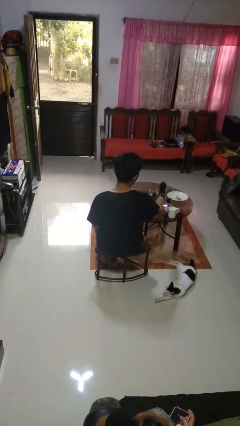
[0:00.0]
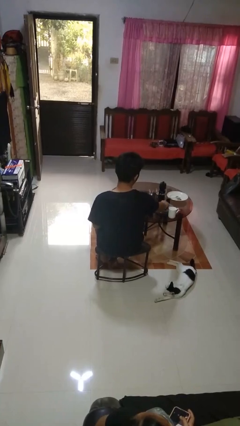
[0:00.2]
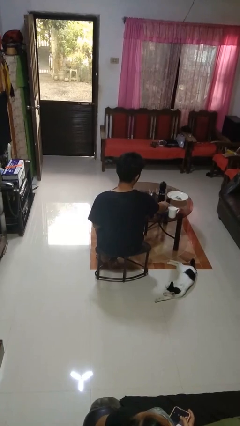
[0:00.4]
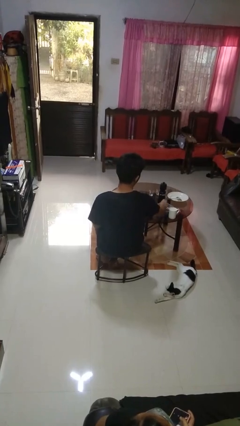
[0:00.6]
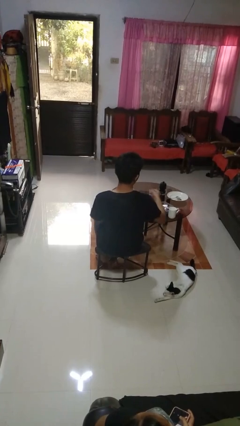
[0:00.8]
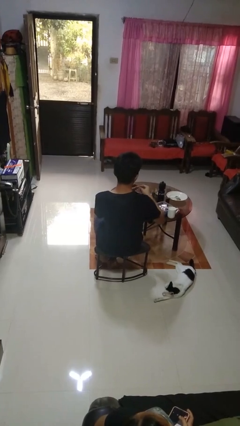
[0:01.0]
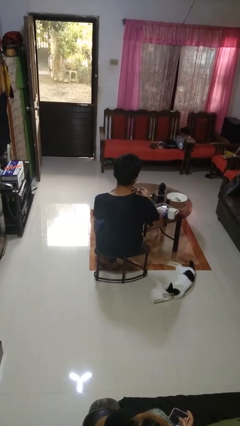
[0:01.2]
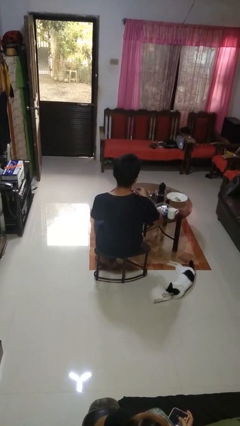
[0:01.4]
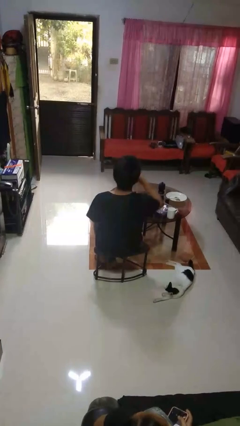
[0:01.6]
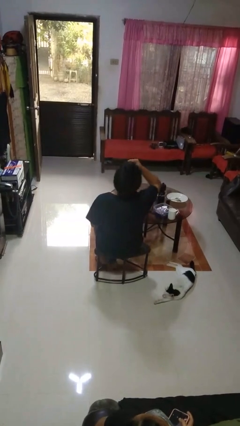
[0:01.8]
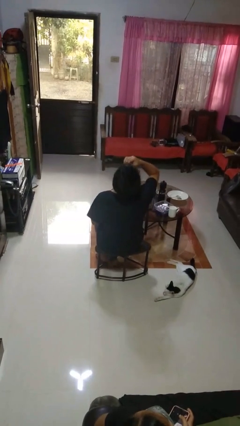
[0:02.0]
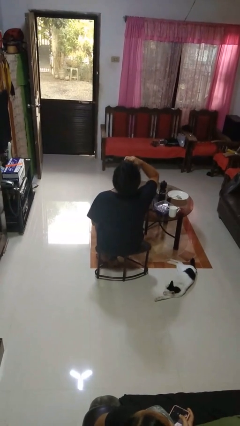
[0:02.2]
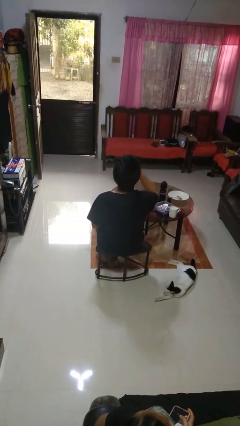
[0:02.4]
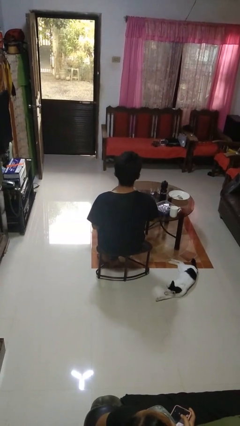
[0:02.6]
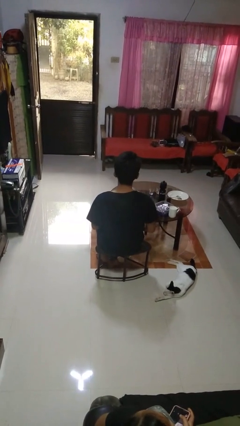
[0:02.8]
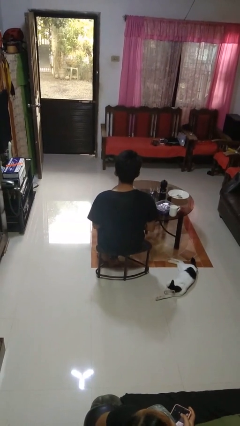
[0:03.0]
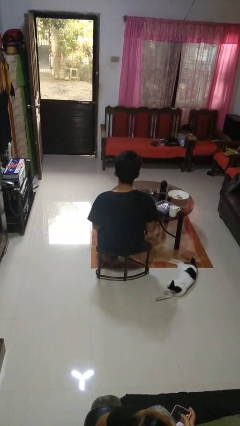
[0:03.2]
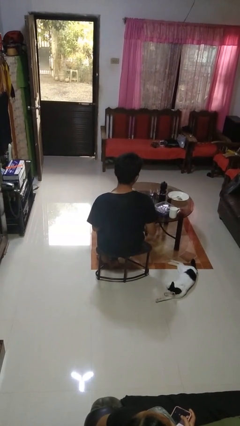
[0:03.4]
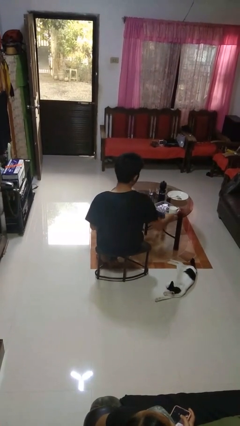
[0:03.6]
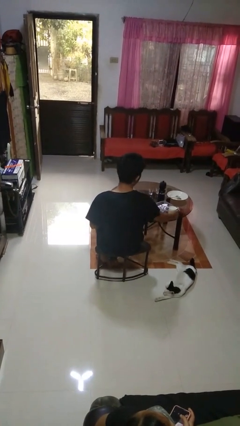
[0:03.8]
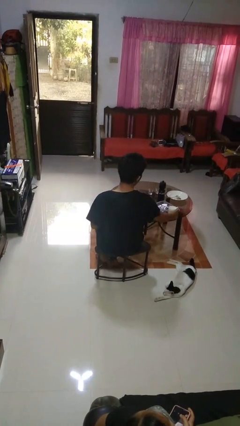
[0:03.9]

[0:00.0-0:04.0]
person takes medicine pills

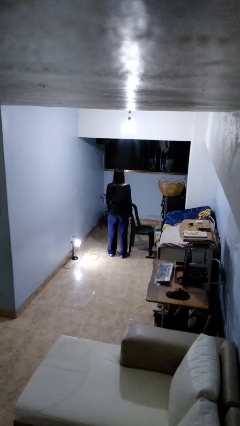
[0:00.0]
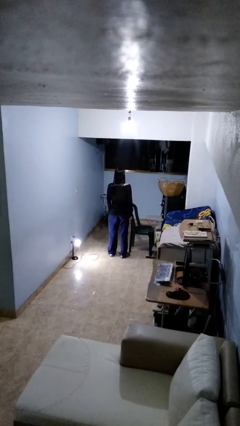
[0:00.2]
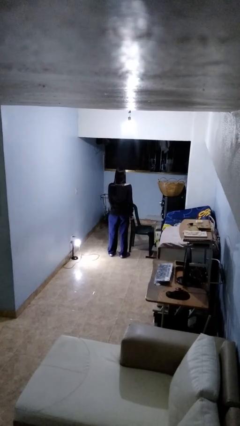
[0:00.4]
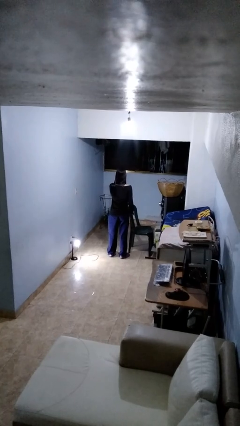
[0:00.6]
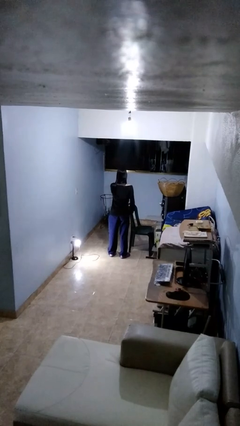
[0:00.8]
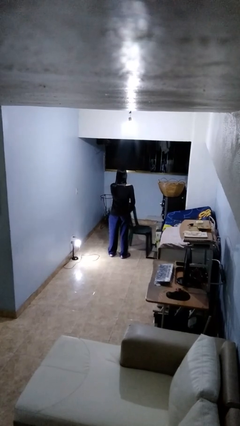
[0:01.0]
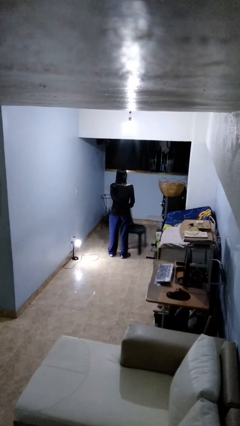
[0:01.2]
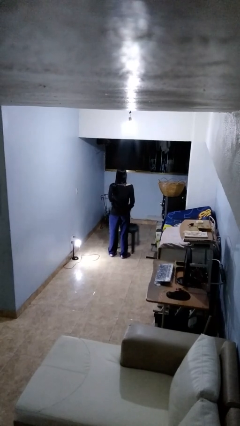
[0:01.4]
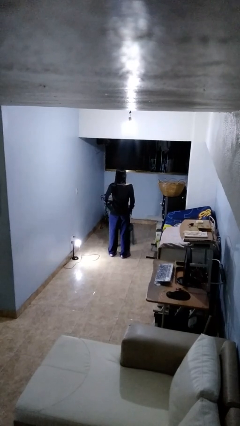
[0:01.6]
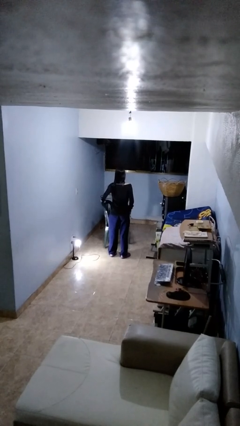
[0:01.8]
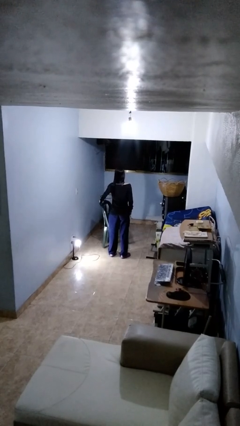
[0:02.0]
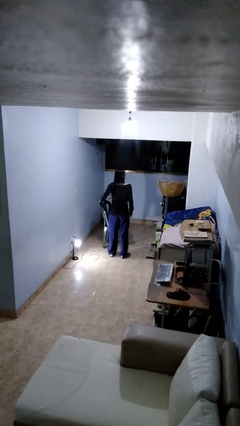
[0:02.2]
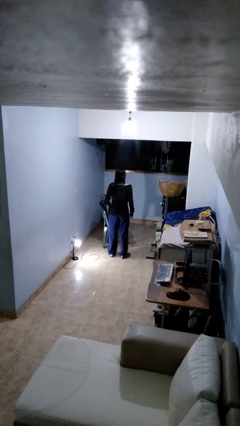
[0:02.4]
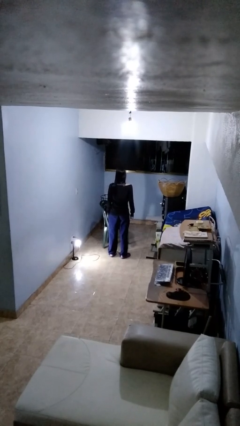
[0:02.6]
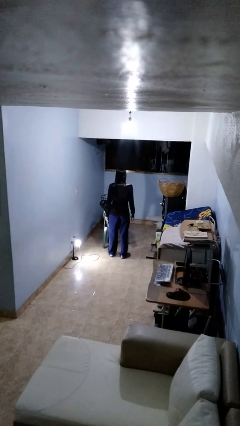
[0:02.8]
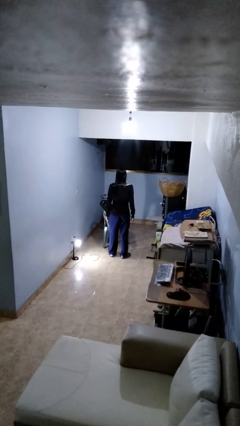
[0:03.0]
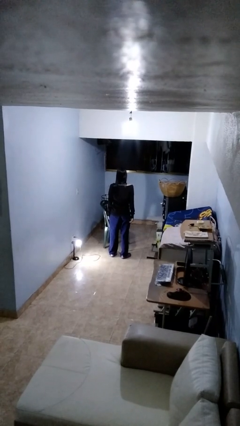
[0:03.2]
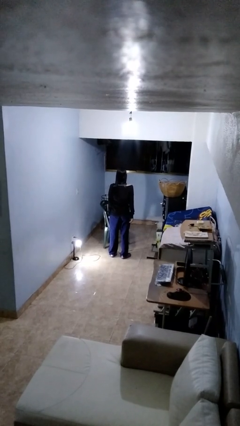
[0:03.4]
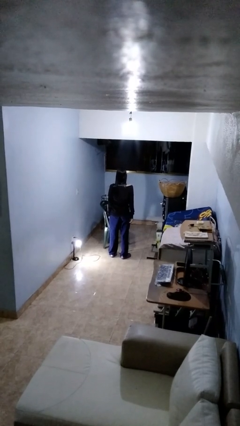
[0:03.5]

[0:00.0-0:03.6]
person pulls out chair

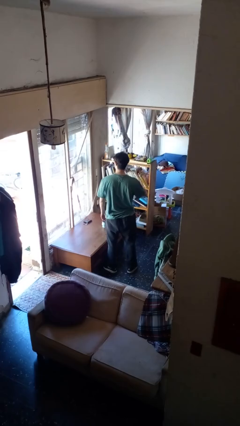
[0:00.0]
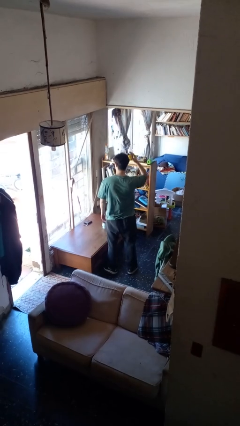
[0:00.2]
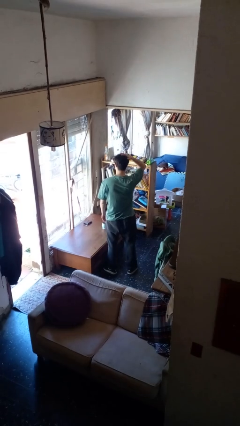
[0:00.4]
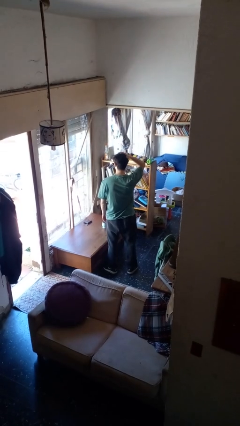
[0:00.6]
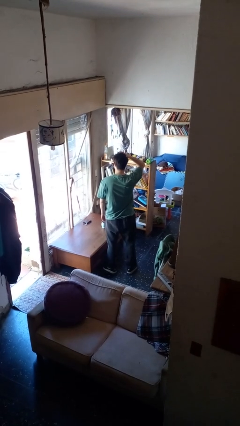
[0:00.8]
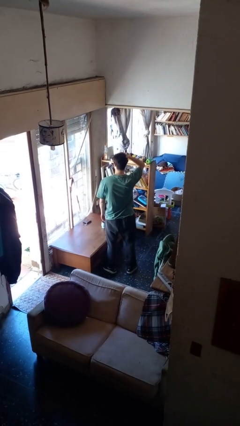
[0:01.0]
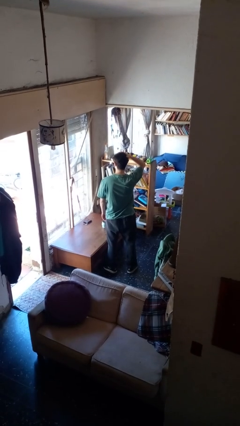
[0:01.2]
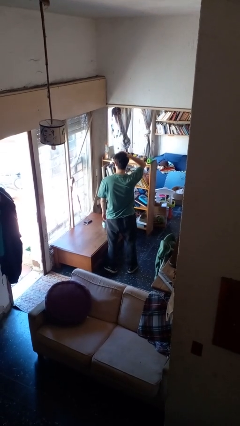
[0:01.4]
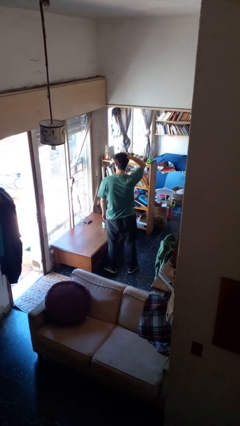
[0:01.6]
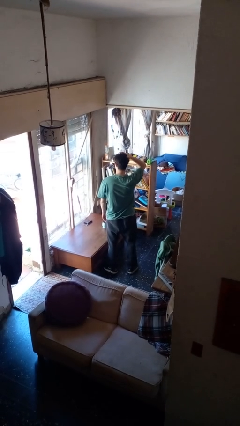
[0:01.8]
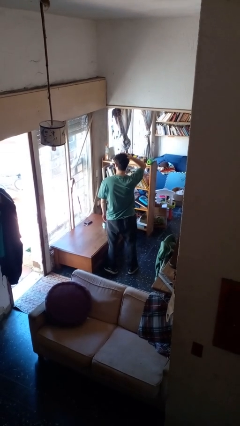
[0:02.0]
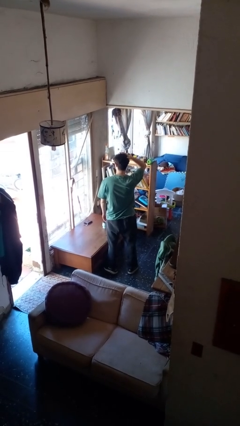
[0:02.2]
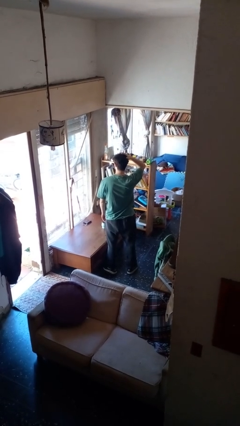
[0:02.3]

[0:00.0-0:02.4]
person pats head

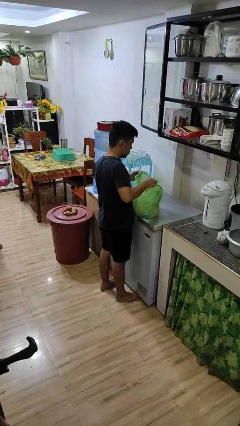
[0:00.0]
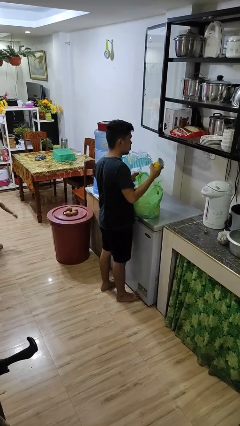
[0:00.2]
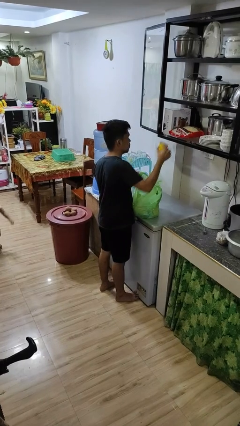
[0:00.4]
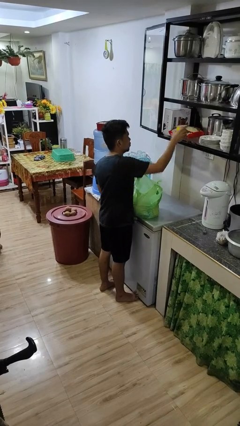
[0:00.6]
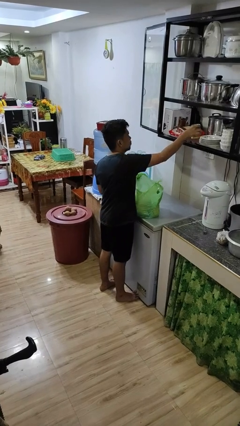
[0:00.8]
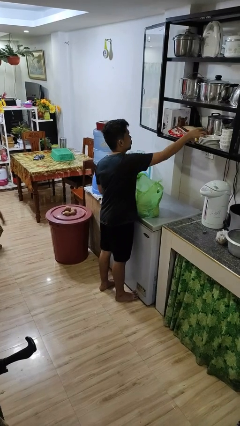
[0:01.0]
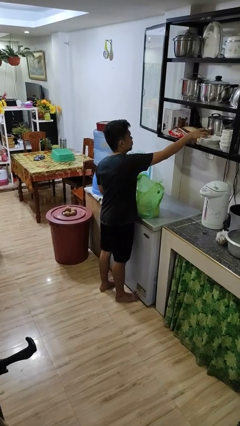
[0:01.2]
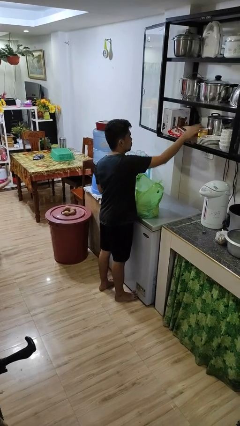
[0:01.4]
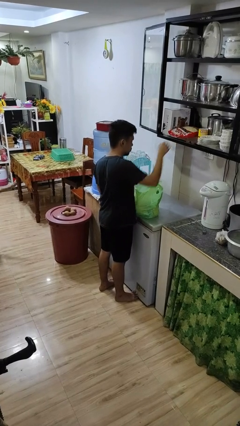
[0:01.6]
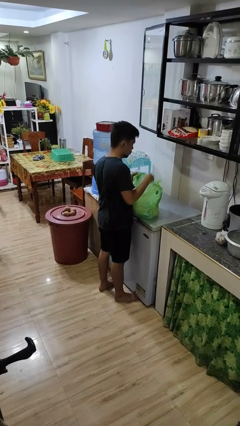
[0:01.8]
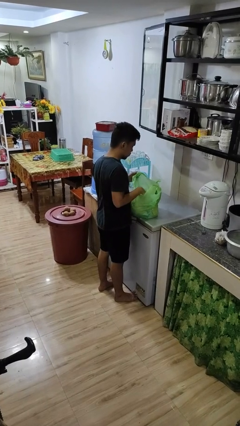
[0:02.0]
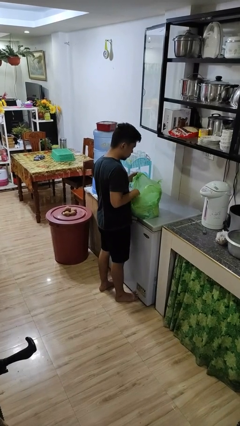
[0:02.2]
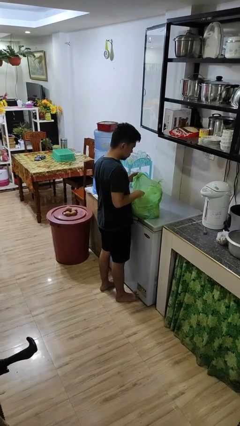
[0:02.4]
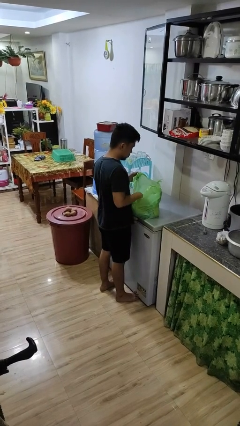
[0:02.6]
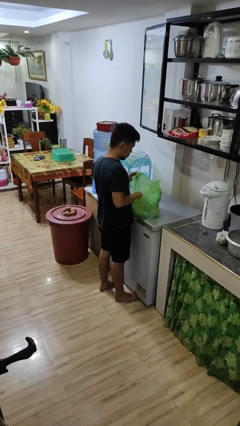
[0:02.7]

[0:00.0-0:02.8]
person loads groceries into cabinet

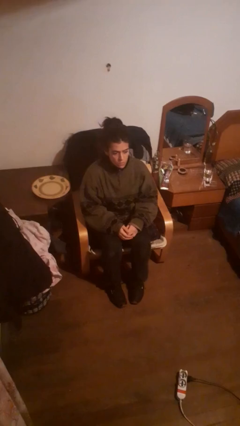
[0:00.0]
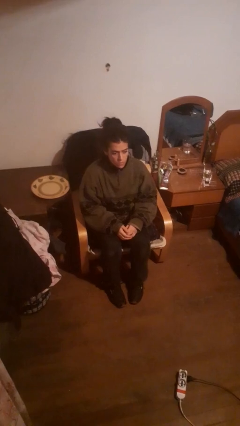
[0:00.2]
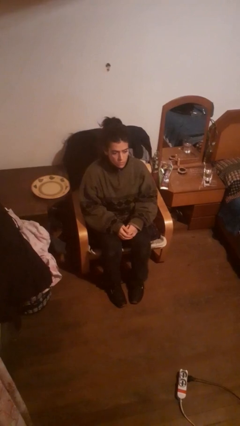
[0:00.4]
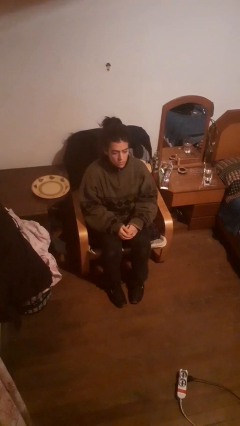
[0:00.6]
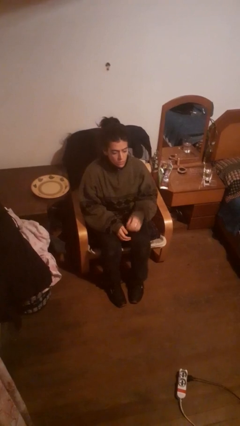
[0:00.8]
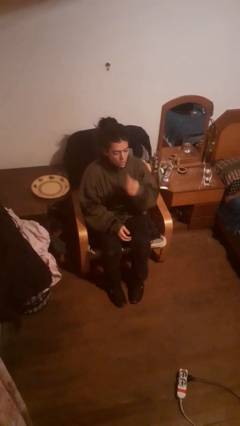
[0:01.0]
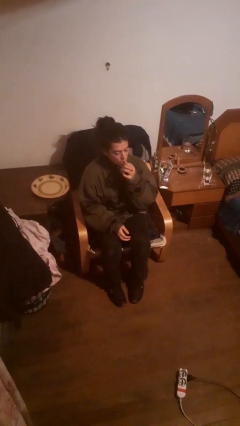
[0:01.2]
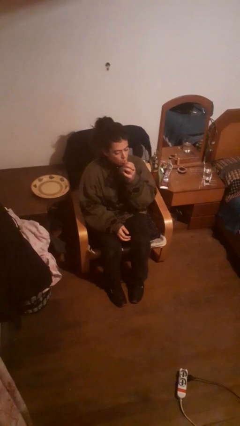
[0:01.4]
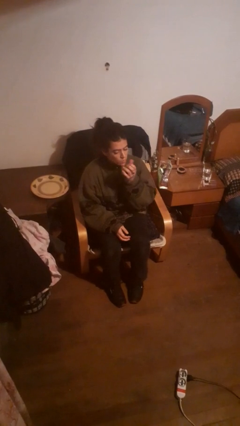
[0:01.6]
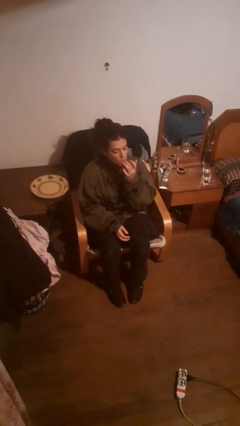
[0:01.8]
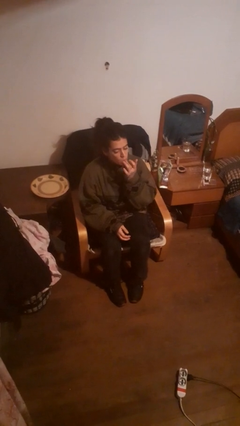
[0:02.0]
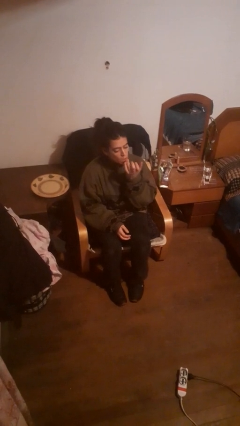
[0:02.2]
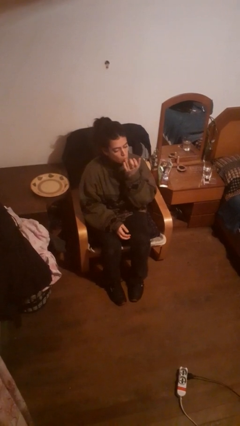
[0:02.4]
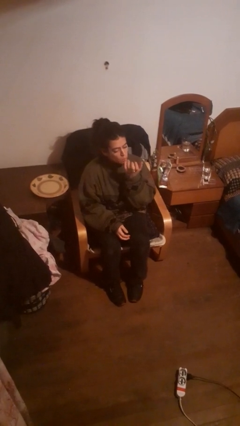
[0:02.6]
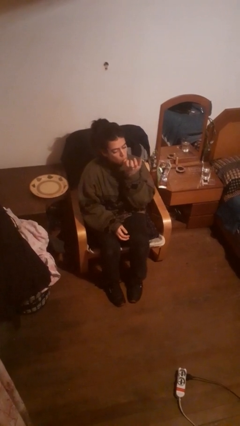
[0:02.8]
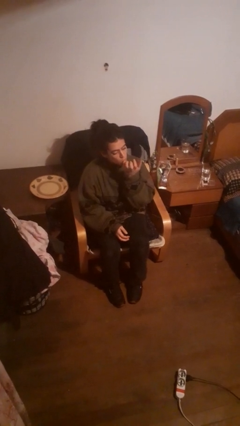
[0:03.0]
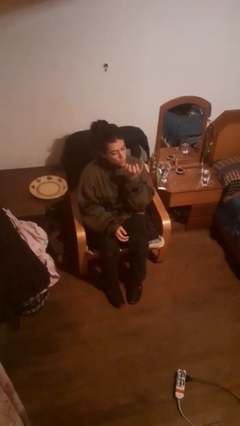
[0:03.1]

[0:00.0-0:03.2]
person licks fingers

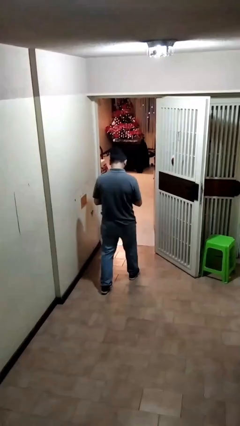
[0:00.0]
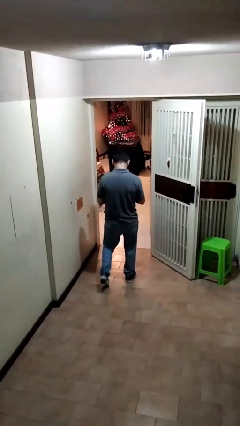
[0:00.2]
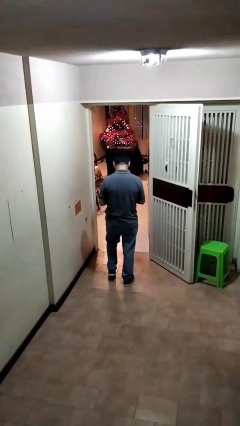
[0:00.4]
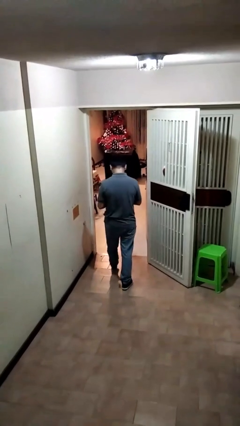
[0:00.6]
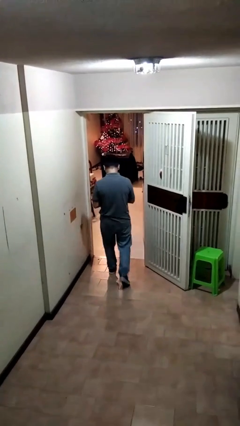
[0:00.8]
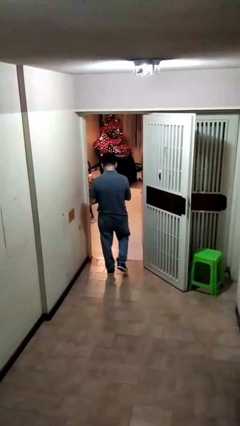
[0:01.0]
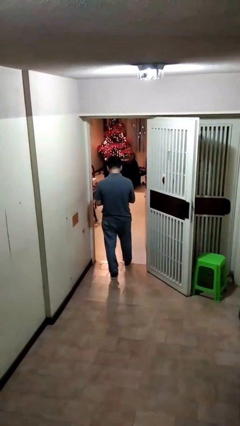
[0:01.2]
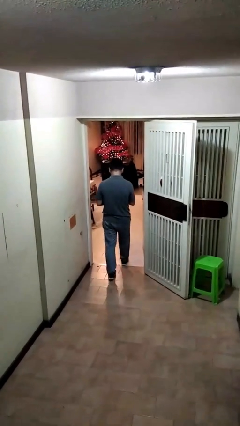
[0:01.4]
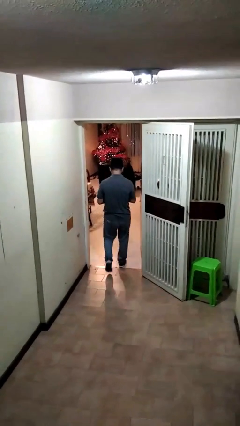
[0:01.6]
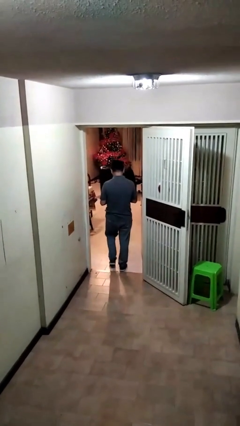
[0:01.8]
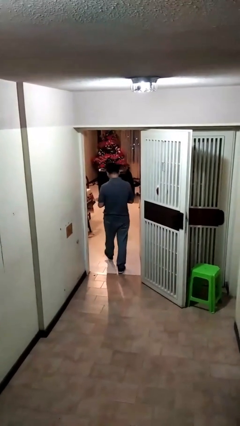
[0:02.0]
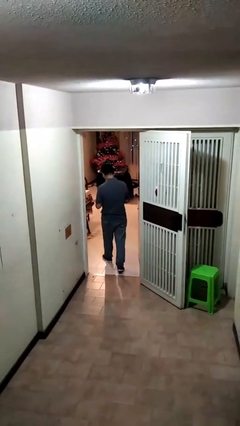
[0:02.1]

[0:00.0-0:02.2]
person exits scene through structure
